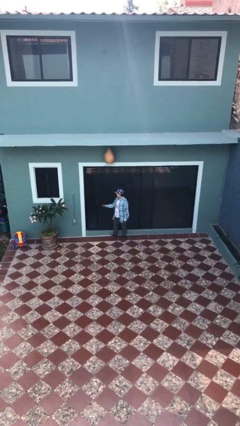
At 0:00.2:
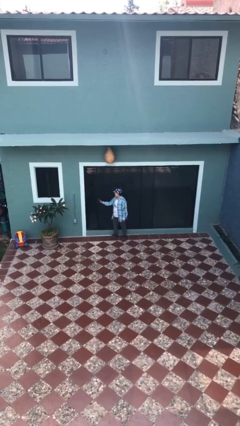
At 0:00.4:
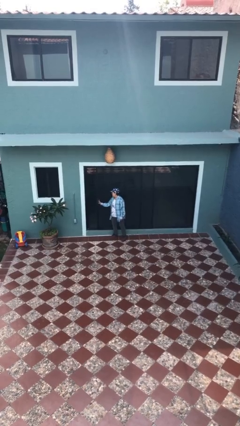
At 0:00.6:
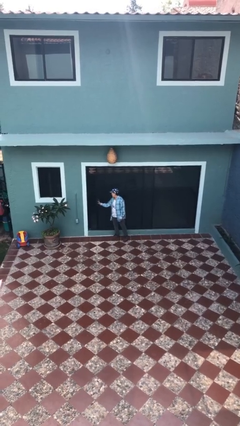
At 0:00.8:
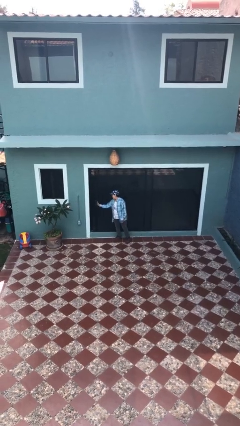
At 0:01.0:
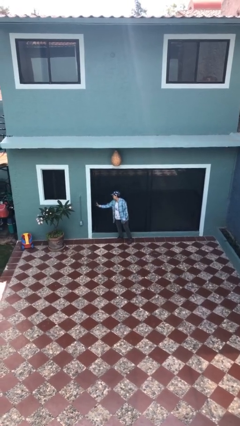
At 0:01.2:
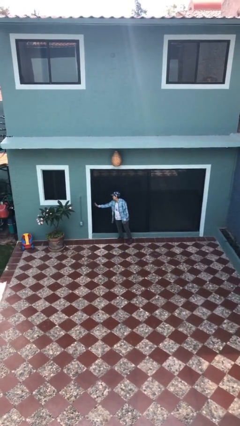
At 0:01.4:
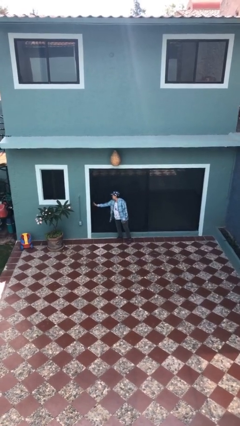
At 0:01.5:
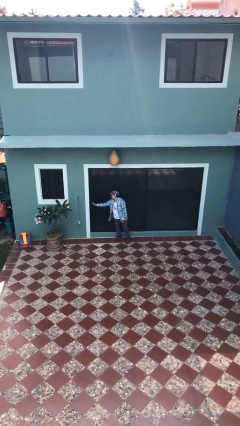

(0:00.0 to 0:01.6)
person closes sliding door

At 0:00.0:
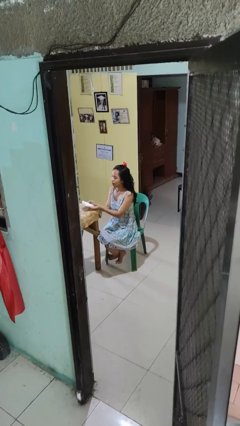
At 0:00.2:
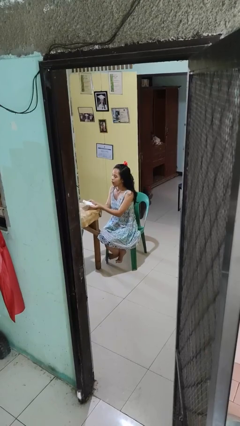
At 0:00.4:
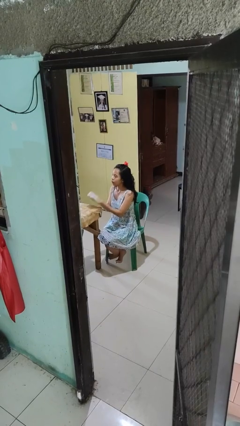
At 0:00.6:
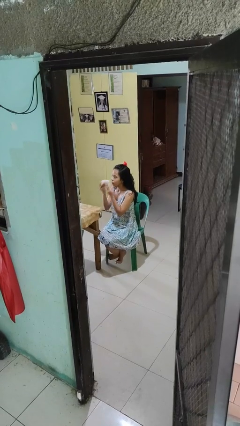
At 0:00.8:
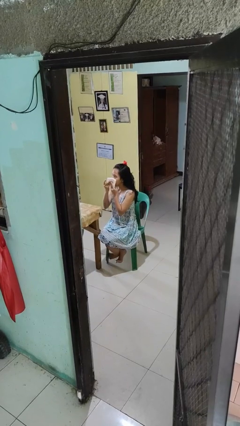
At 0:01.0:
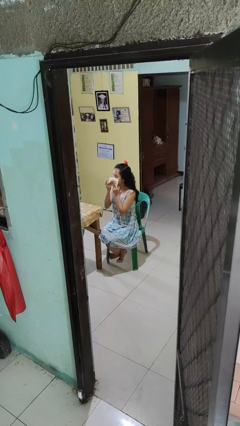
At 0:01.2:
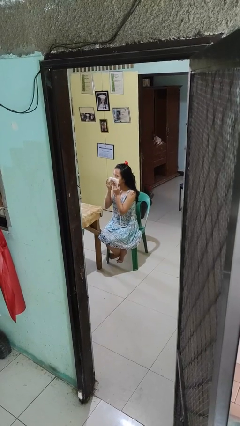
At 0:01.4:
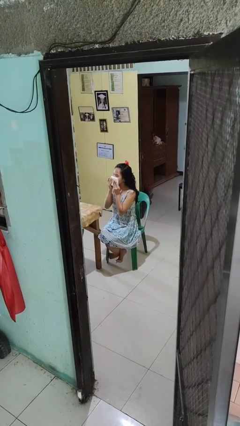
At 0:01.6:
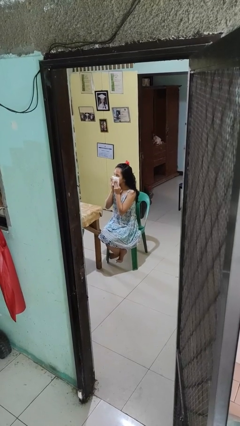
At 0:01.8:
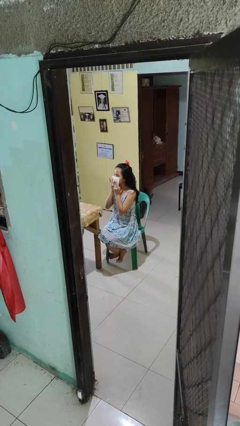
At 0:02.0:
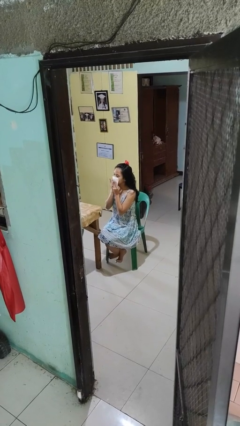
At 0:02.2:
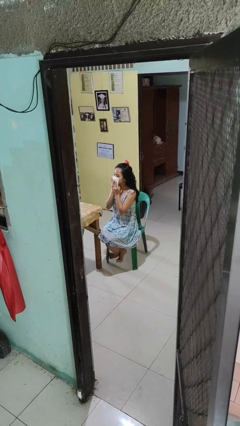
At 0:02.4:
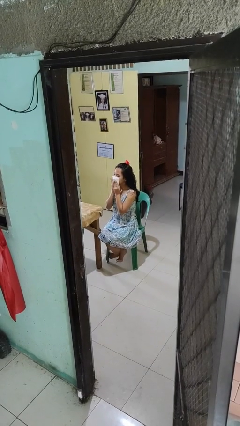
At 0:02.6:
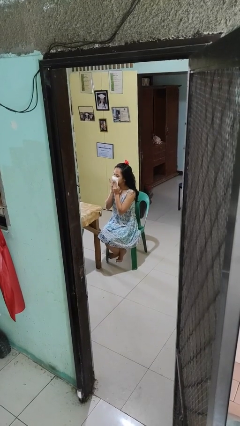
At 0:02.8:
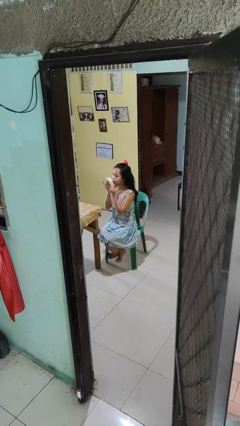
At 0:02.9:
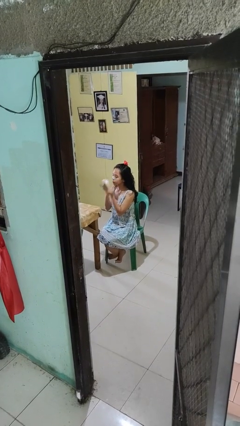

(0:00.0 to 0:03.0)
person wipes mouth with napkin

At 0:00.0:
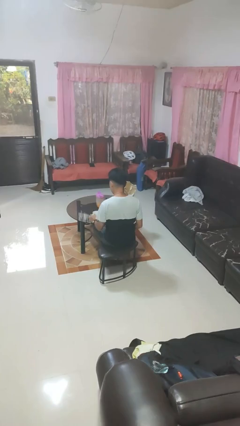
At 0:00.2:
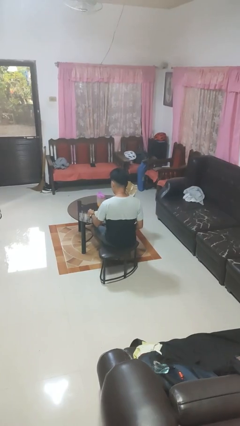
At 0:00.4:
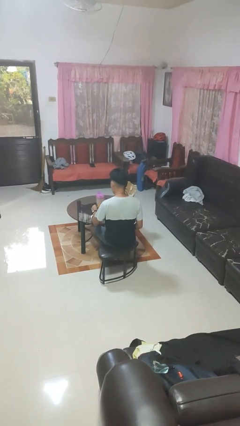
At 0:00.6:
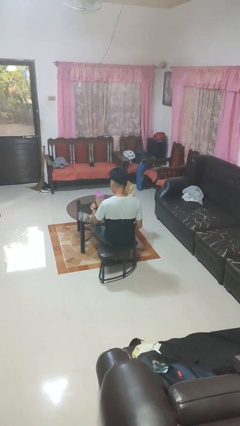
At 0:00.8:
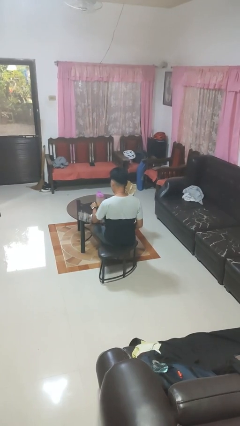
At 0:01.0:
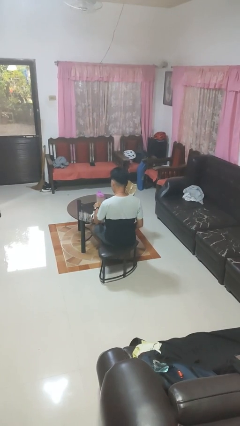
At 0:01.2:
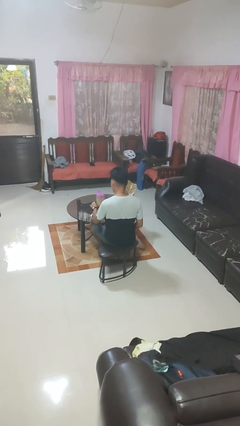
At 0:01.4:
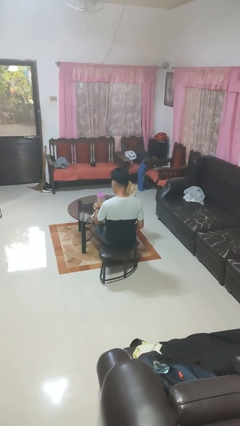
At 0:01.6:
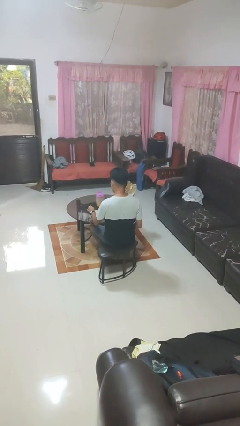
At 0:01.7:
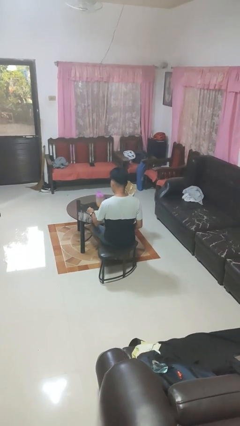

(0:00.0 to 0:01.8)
person stirs mug

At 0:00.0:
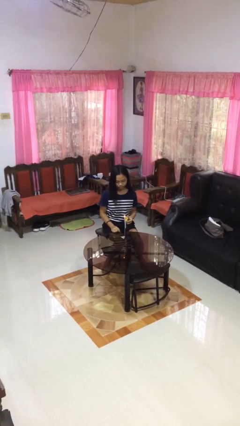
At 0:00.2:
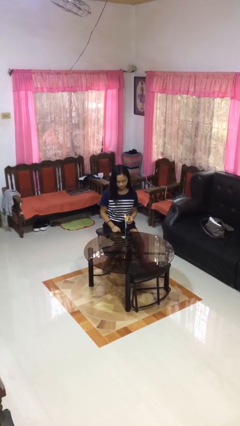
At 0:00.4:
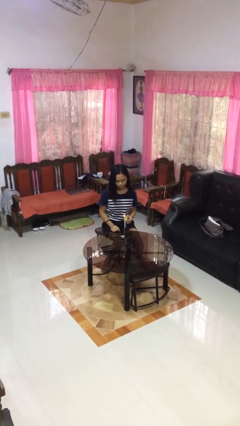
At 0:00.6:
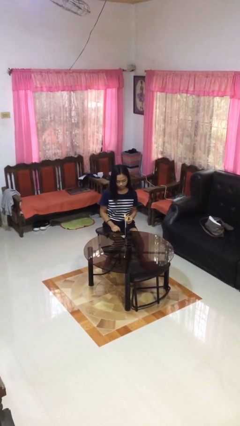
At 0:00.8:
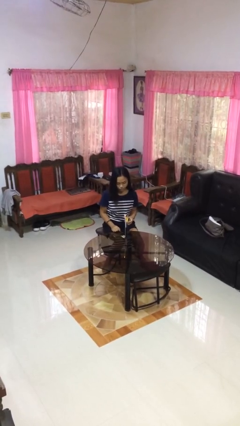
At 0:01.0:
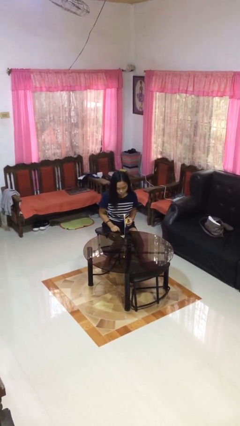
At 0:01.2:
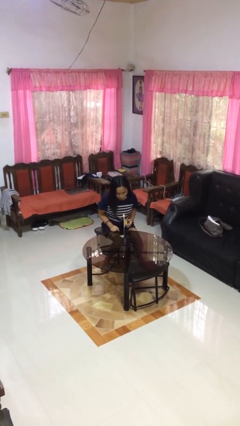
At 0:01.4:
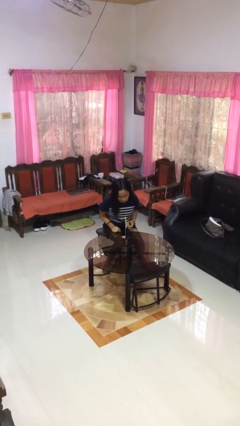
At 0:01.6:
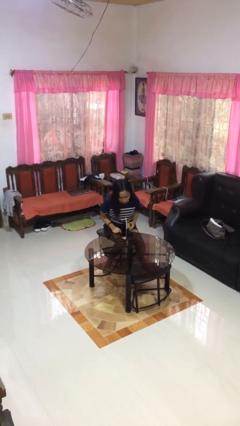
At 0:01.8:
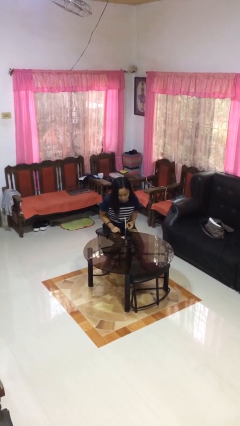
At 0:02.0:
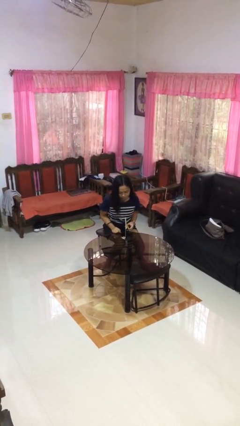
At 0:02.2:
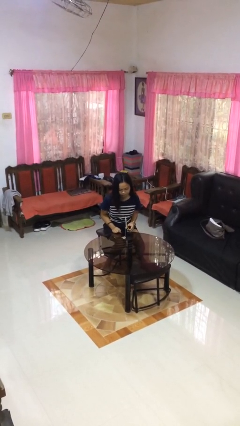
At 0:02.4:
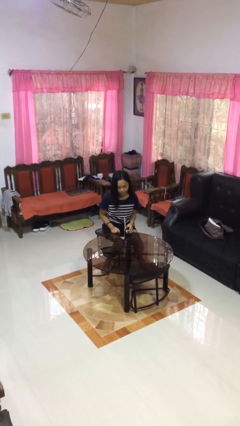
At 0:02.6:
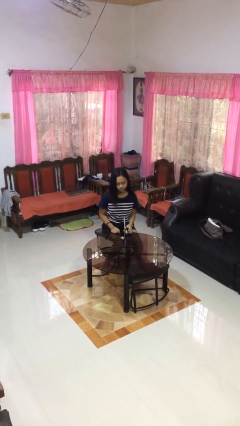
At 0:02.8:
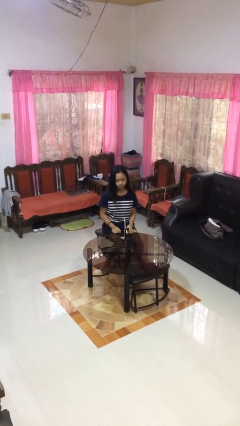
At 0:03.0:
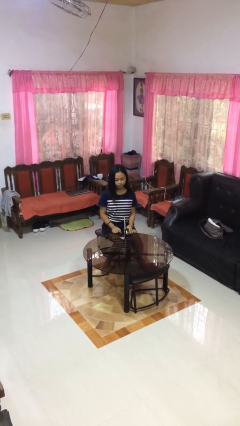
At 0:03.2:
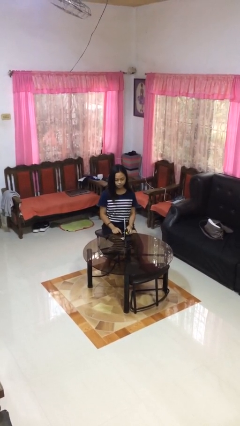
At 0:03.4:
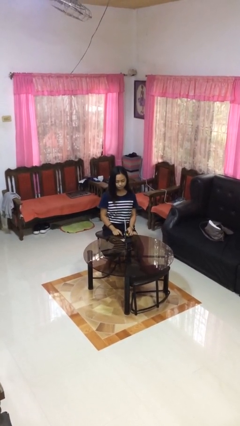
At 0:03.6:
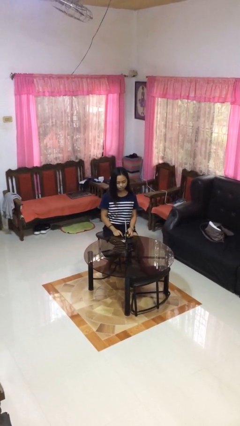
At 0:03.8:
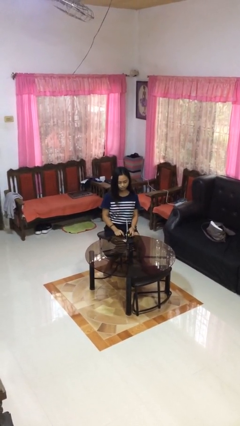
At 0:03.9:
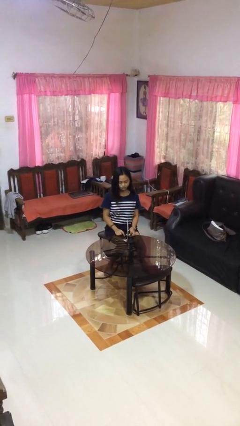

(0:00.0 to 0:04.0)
person extinguishes candle

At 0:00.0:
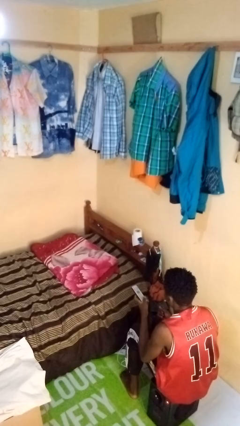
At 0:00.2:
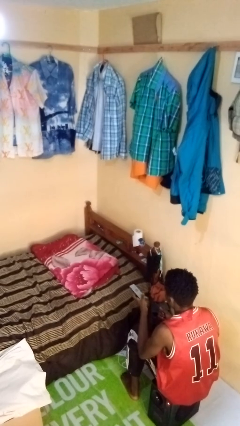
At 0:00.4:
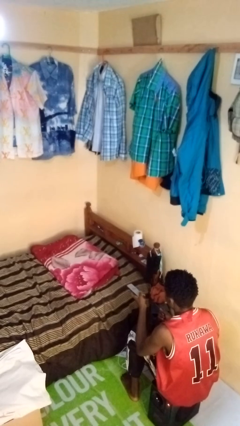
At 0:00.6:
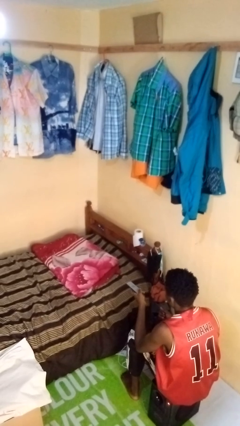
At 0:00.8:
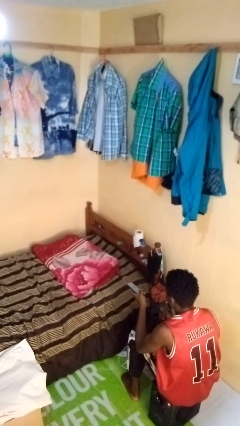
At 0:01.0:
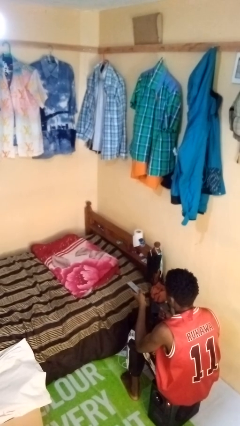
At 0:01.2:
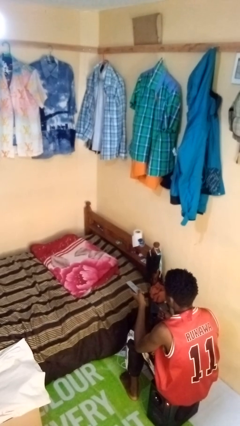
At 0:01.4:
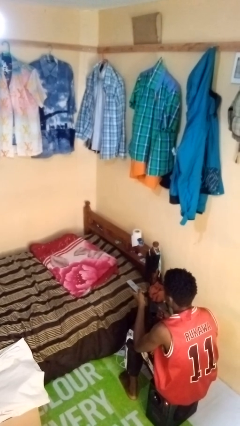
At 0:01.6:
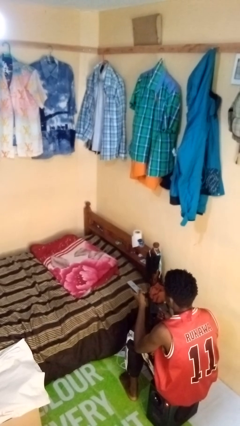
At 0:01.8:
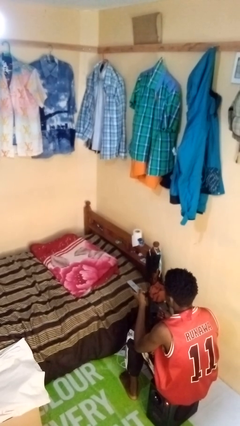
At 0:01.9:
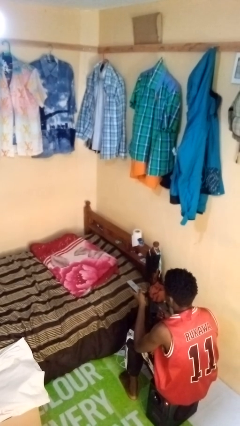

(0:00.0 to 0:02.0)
person uses television remote

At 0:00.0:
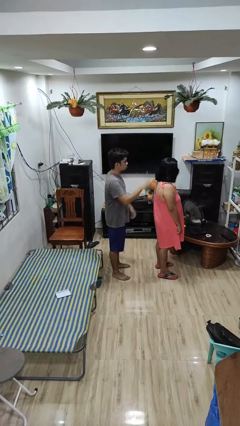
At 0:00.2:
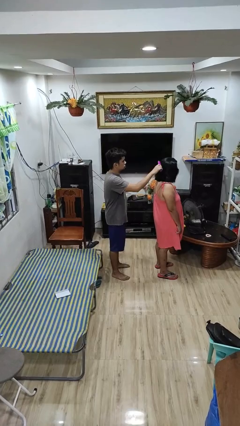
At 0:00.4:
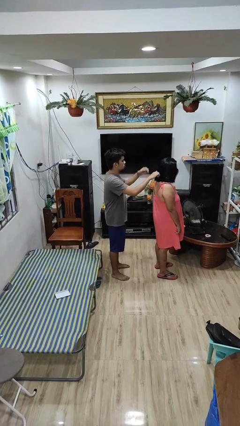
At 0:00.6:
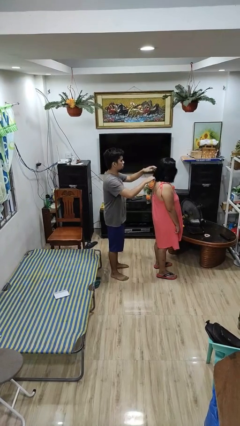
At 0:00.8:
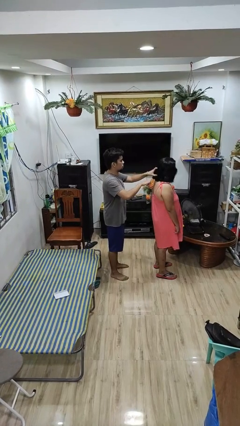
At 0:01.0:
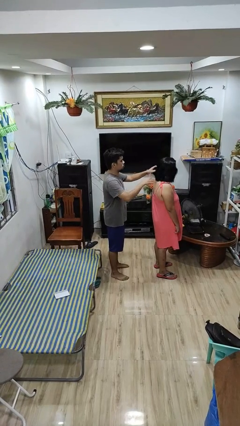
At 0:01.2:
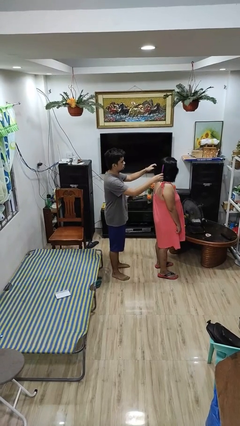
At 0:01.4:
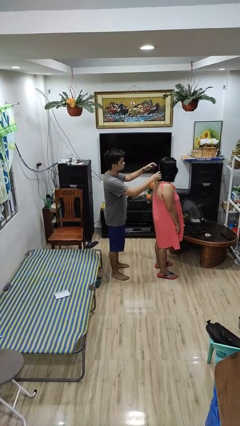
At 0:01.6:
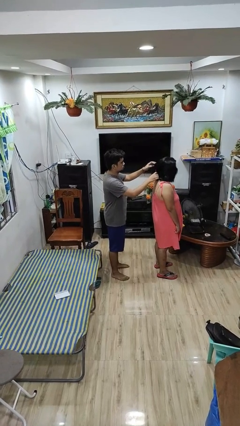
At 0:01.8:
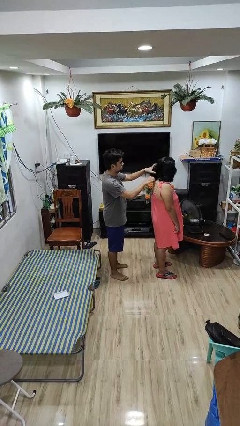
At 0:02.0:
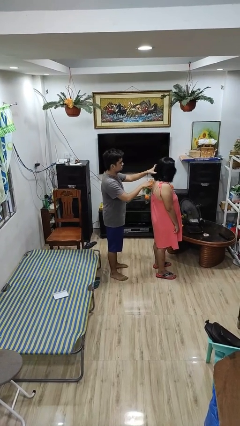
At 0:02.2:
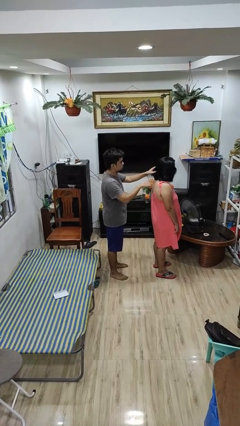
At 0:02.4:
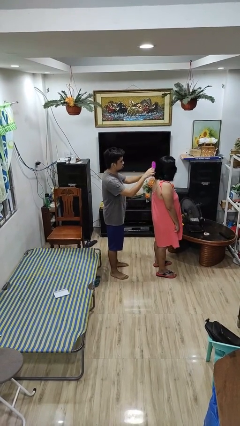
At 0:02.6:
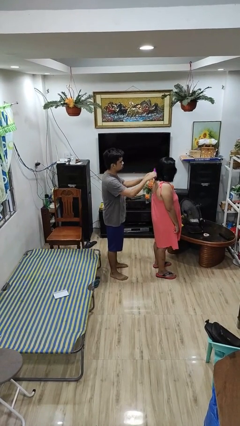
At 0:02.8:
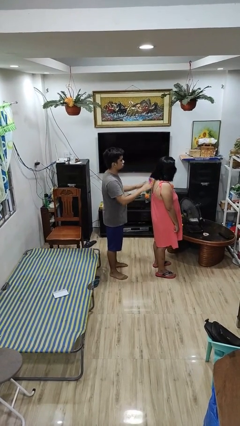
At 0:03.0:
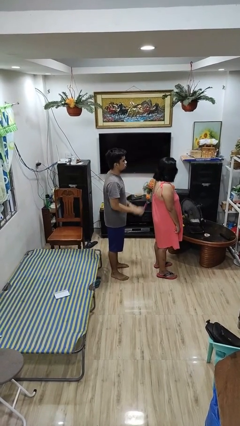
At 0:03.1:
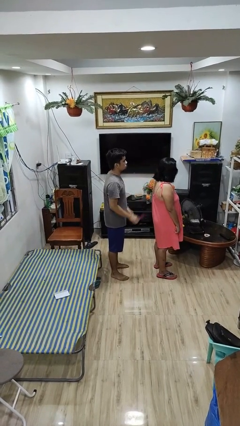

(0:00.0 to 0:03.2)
person brushes hair of person

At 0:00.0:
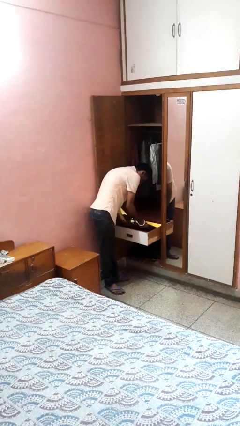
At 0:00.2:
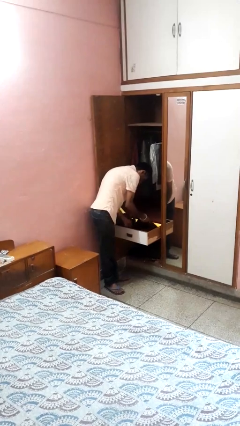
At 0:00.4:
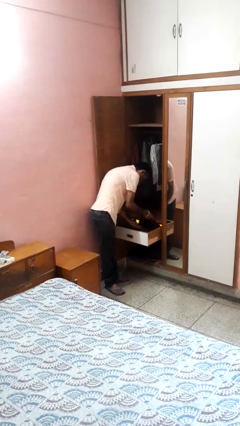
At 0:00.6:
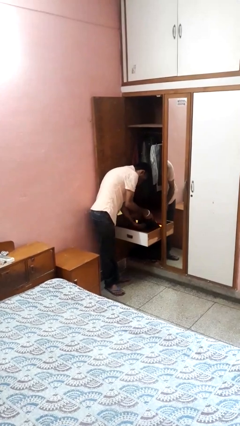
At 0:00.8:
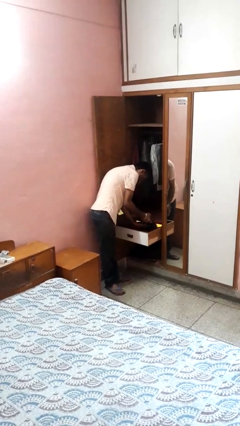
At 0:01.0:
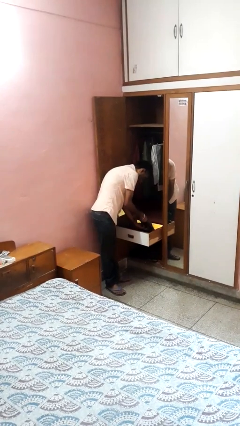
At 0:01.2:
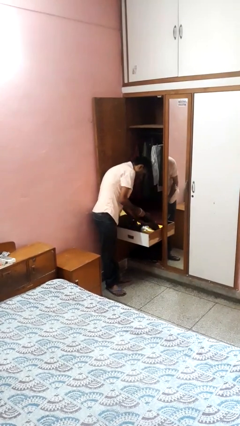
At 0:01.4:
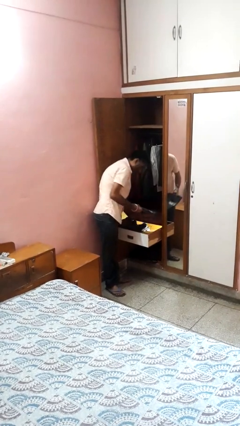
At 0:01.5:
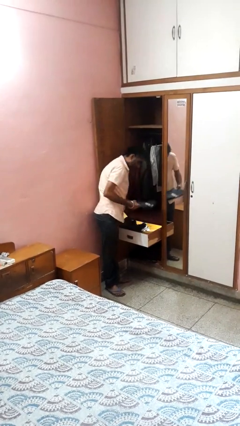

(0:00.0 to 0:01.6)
person takes clothes from dresser
